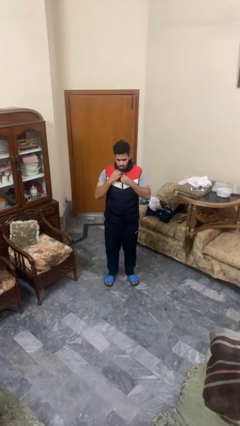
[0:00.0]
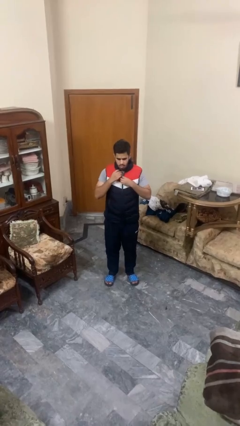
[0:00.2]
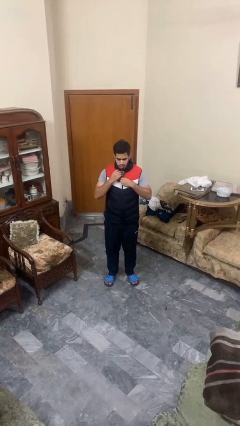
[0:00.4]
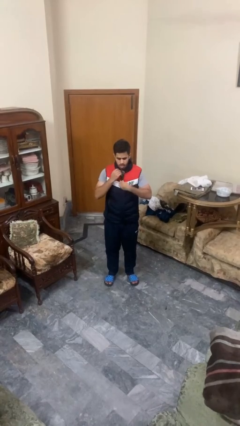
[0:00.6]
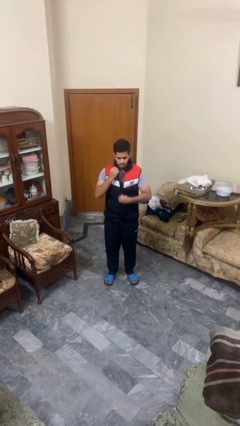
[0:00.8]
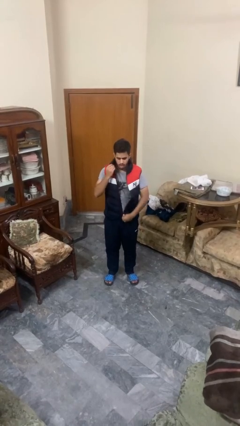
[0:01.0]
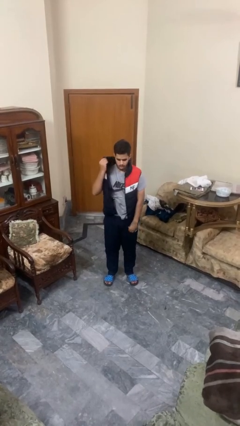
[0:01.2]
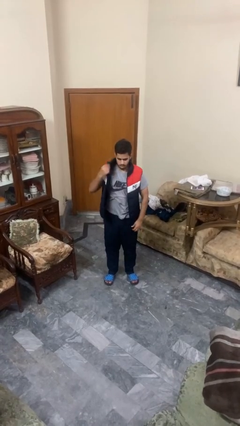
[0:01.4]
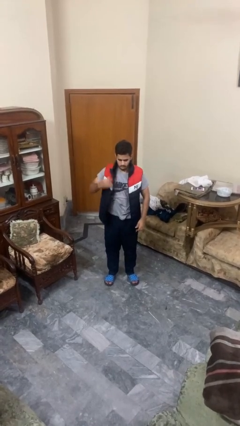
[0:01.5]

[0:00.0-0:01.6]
person unzips jacket

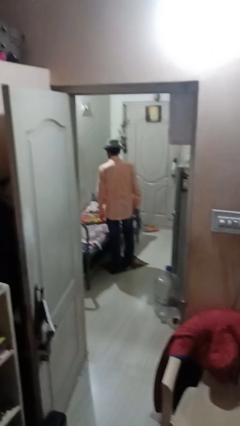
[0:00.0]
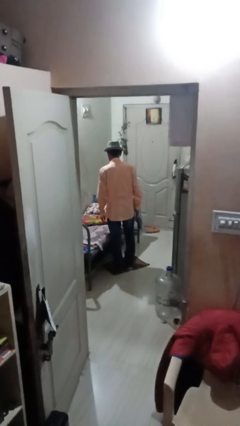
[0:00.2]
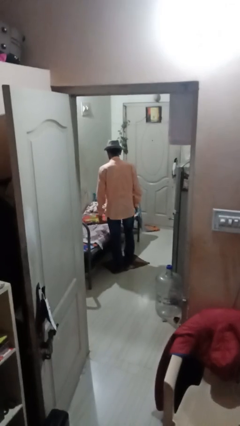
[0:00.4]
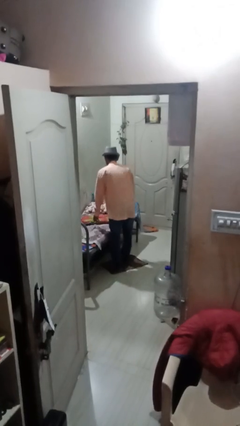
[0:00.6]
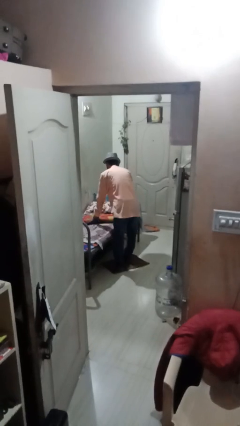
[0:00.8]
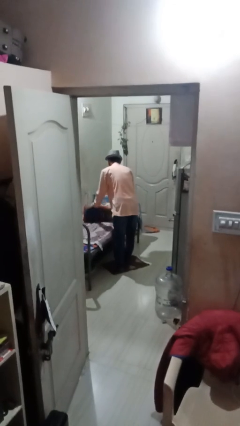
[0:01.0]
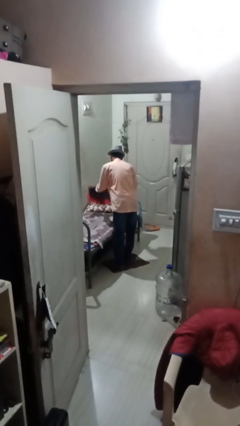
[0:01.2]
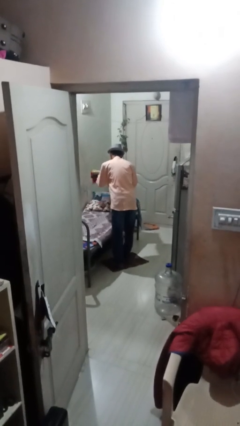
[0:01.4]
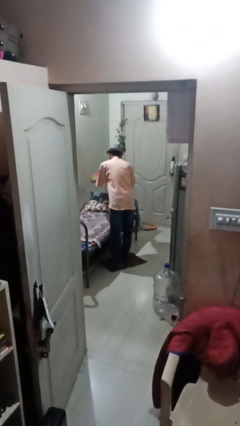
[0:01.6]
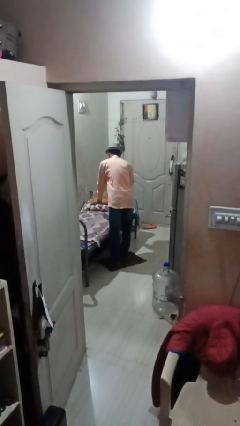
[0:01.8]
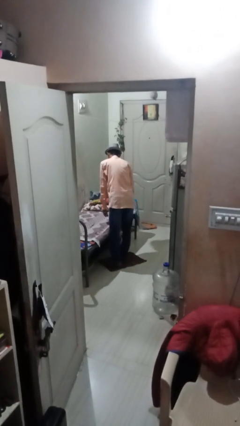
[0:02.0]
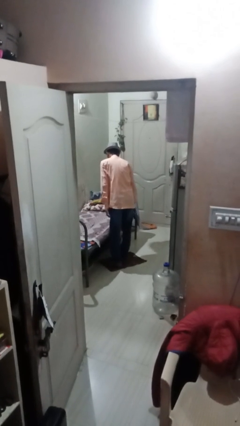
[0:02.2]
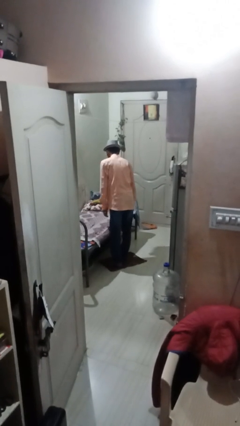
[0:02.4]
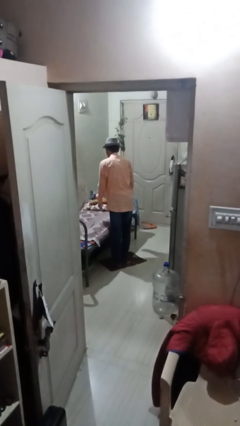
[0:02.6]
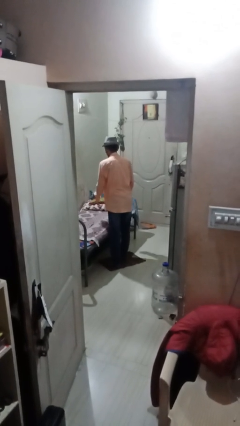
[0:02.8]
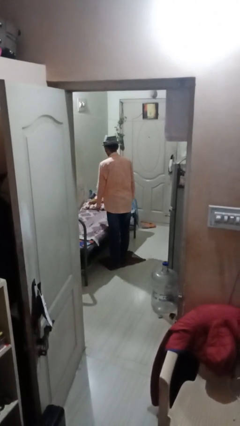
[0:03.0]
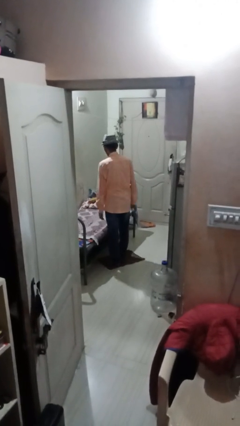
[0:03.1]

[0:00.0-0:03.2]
person makes bed

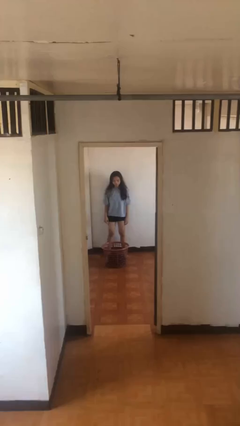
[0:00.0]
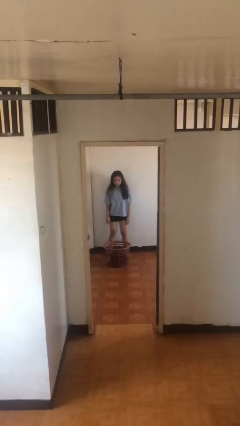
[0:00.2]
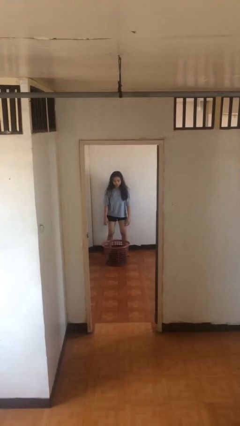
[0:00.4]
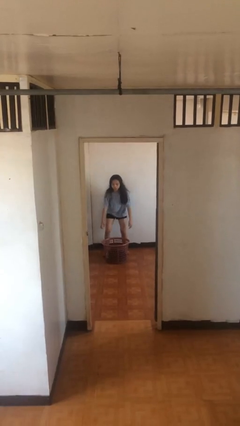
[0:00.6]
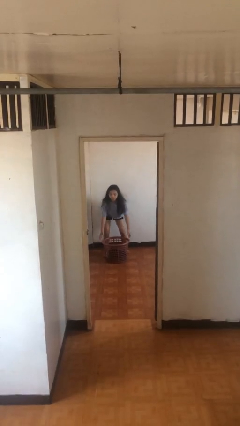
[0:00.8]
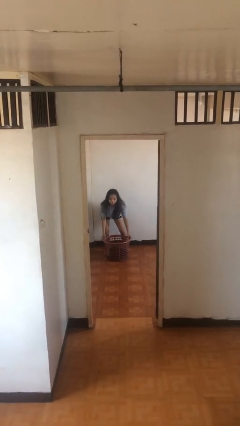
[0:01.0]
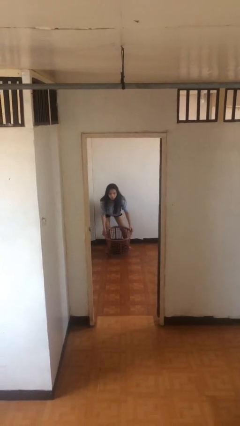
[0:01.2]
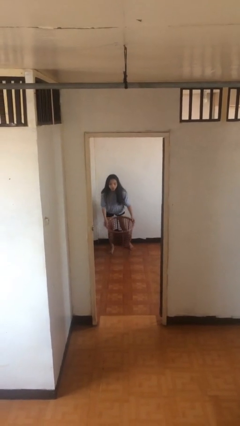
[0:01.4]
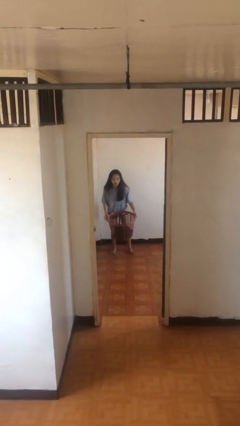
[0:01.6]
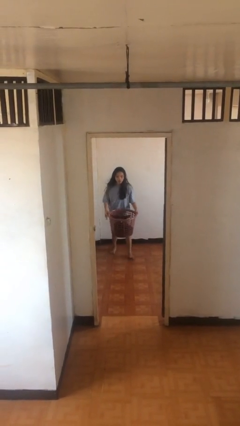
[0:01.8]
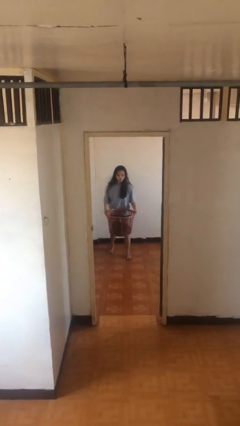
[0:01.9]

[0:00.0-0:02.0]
person picks up object from floor

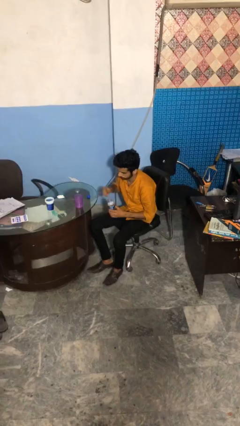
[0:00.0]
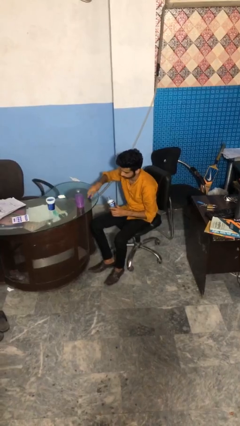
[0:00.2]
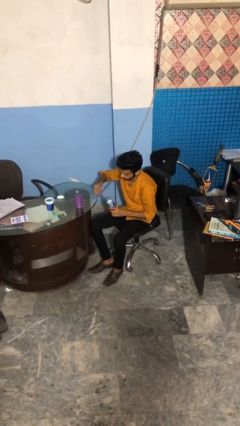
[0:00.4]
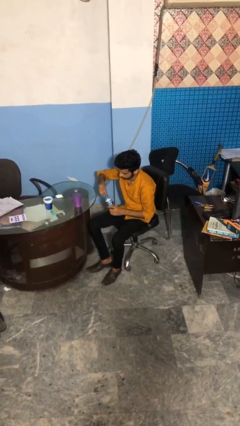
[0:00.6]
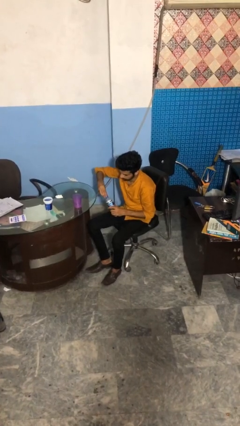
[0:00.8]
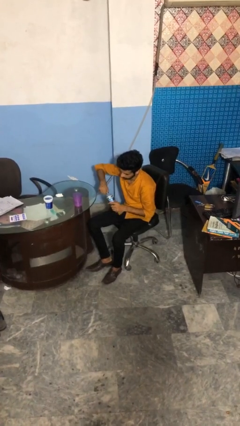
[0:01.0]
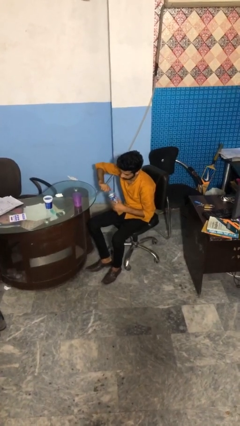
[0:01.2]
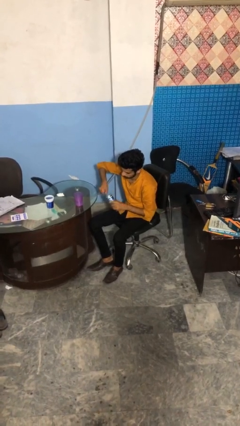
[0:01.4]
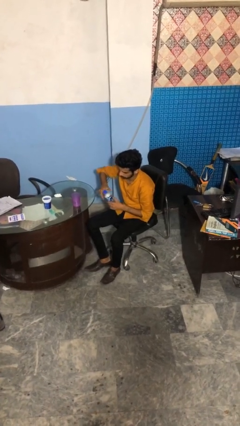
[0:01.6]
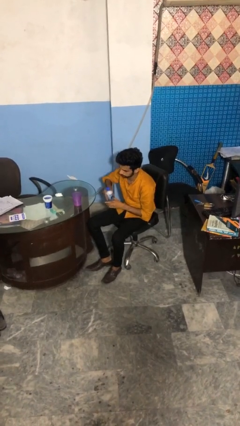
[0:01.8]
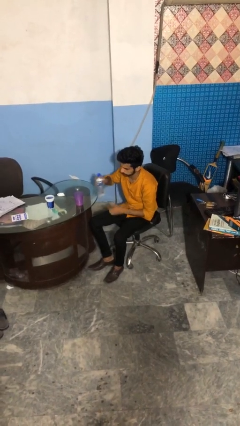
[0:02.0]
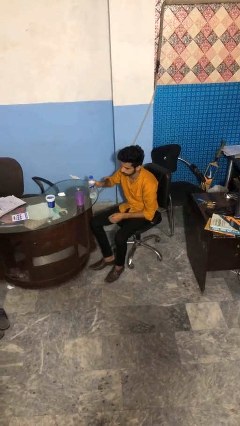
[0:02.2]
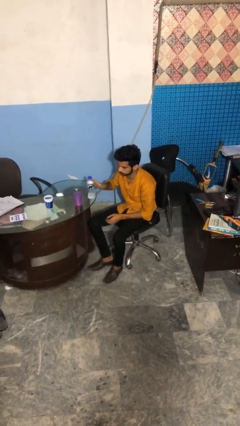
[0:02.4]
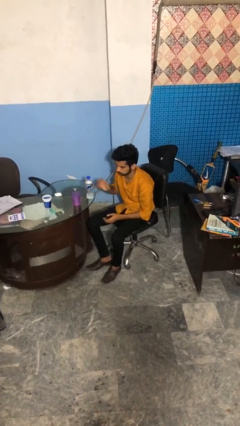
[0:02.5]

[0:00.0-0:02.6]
person screws lid to bottle

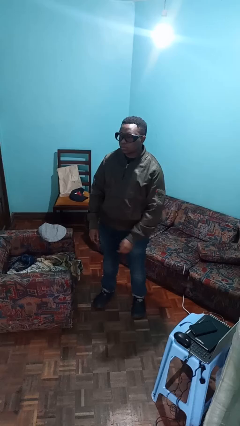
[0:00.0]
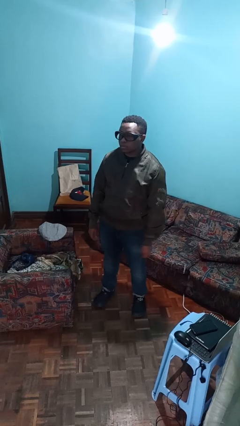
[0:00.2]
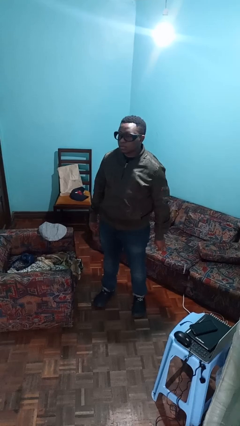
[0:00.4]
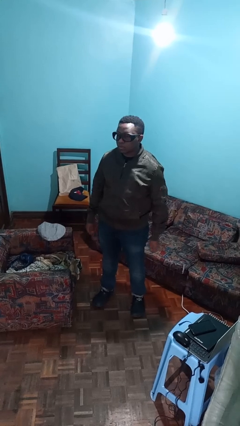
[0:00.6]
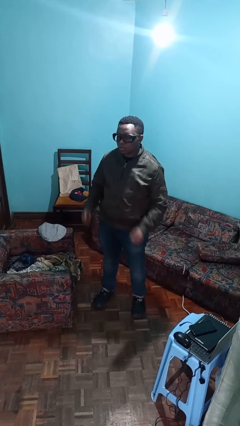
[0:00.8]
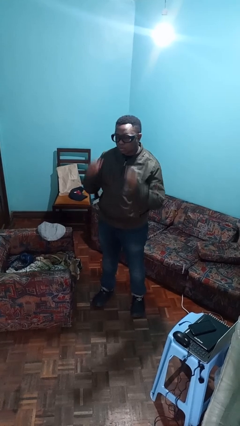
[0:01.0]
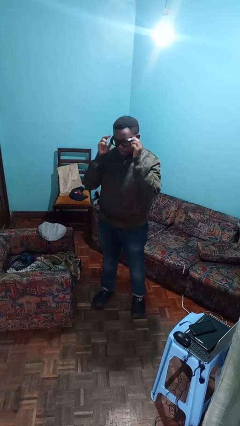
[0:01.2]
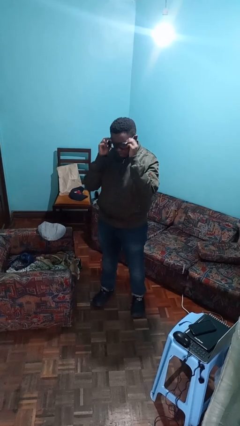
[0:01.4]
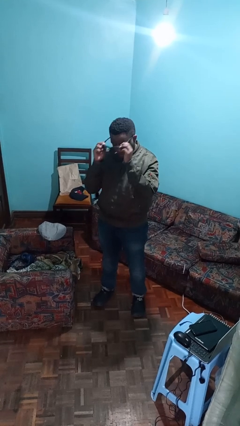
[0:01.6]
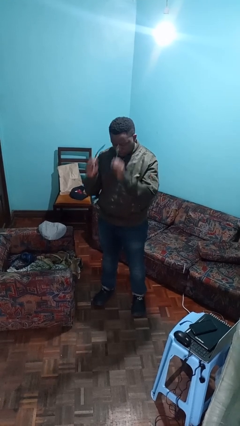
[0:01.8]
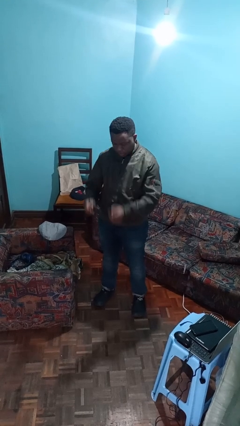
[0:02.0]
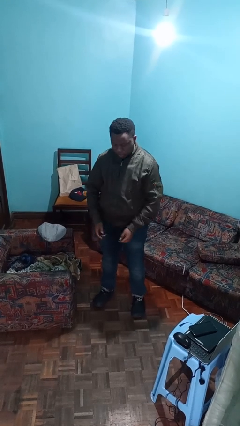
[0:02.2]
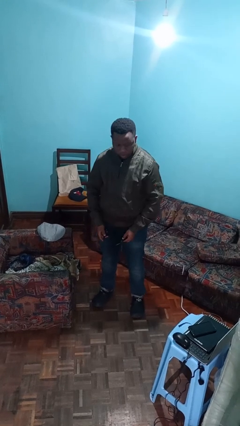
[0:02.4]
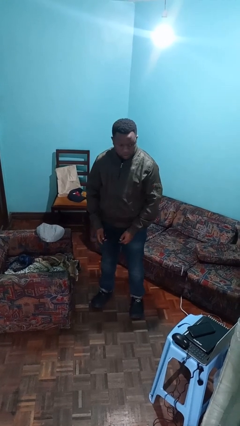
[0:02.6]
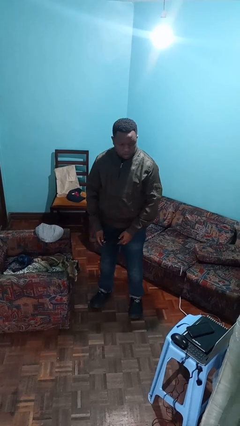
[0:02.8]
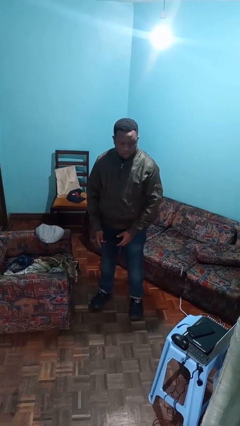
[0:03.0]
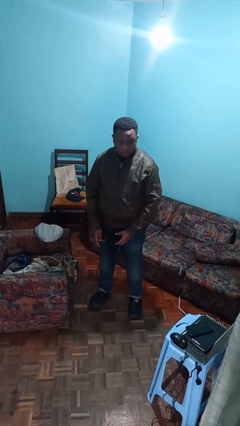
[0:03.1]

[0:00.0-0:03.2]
person takes off glasses

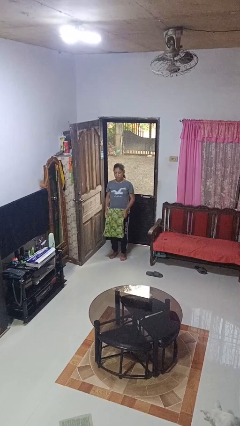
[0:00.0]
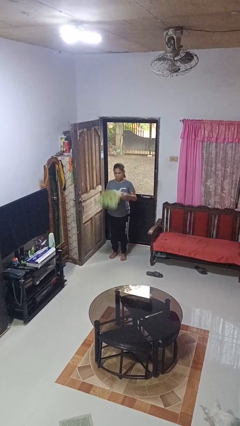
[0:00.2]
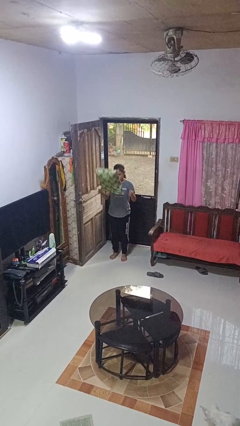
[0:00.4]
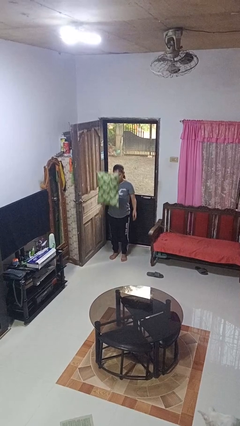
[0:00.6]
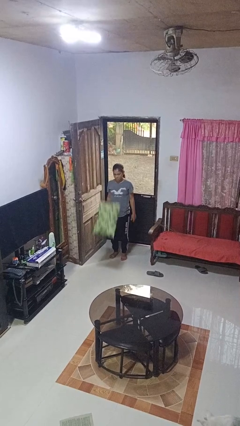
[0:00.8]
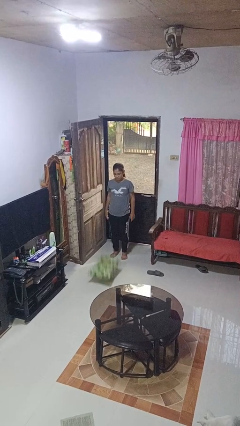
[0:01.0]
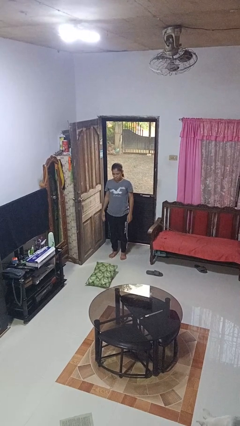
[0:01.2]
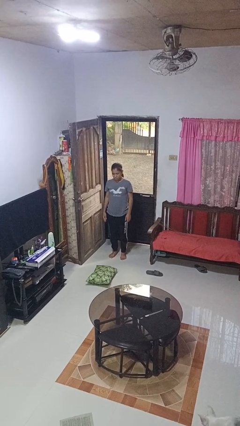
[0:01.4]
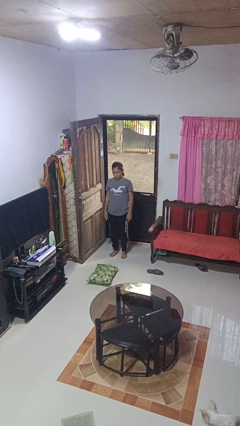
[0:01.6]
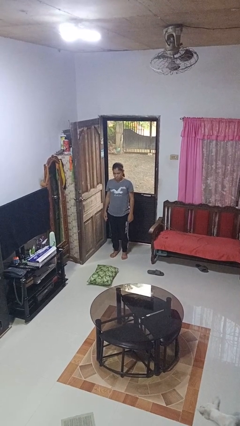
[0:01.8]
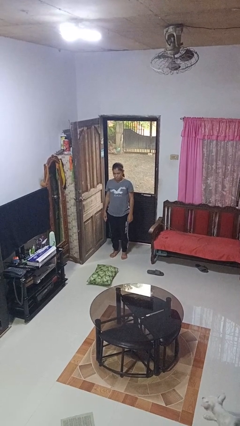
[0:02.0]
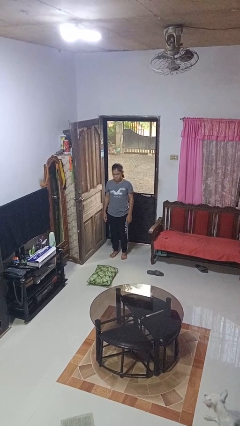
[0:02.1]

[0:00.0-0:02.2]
person throws object into air

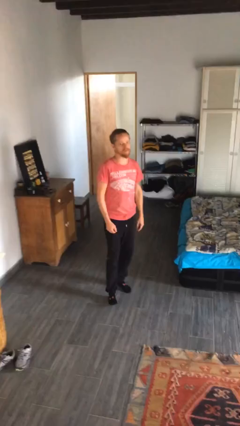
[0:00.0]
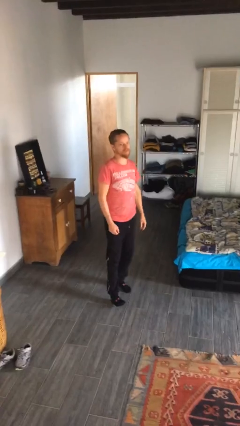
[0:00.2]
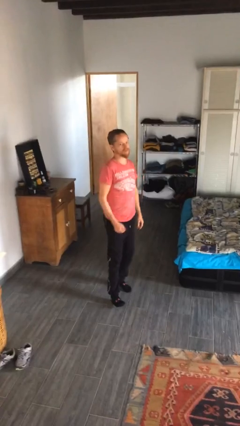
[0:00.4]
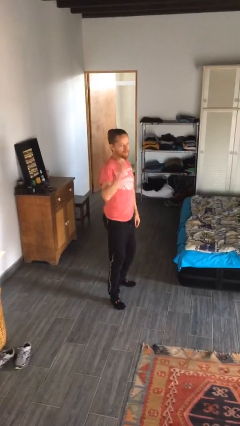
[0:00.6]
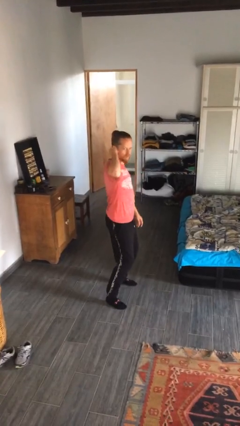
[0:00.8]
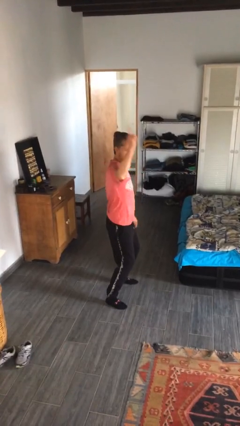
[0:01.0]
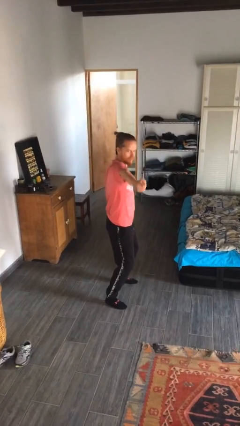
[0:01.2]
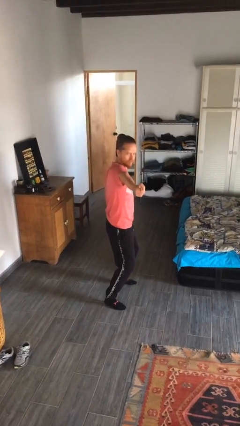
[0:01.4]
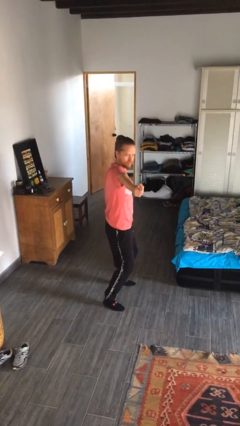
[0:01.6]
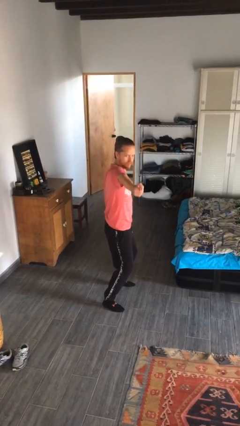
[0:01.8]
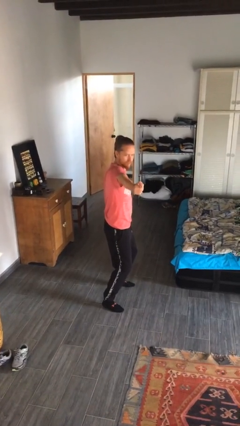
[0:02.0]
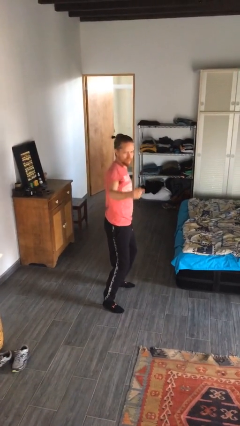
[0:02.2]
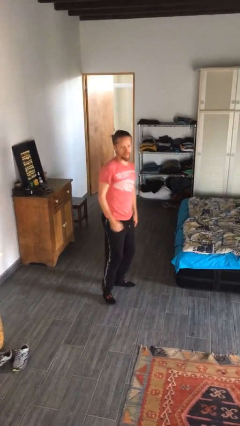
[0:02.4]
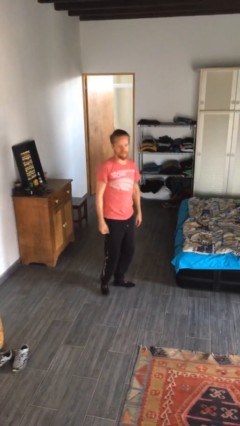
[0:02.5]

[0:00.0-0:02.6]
person points at person
